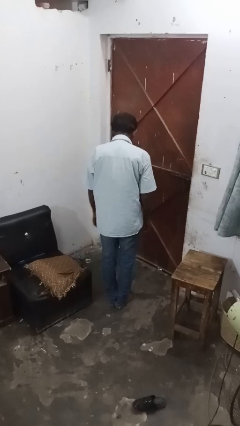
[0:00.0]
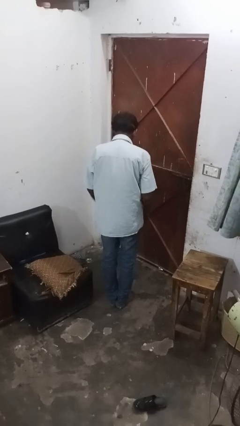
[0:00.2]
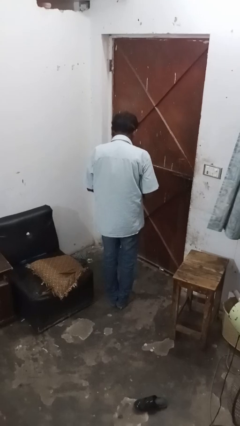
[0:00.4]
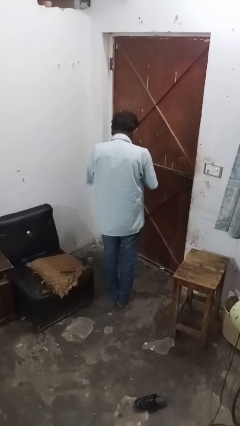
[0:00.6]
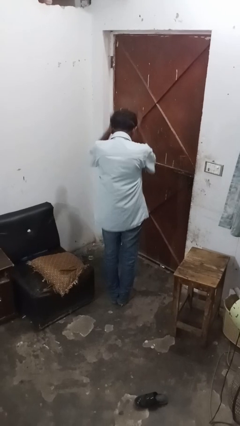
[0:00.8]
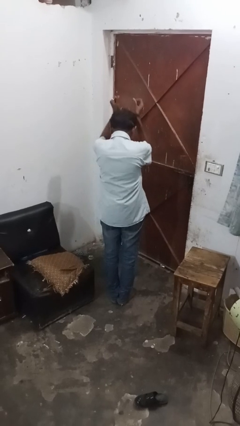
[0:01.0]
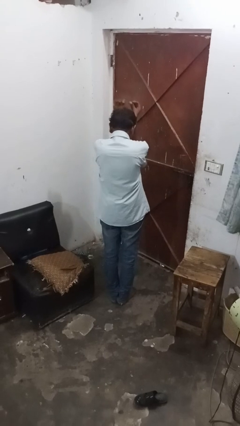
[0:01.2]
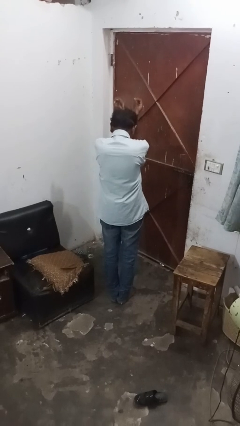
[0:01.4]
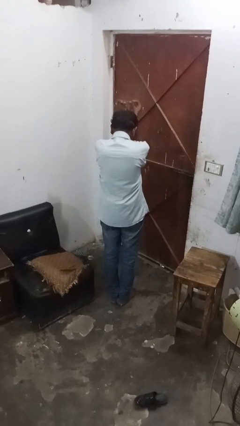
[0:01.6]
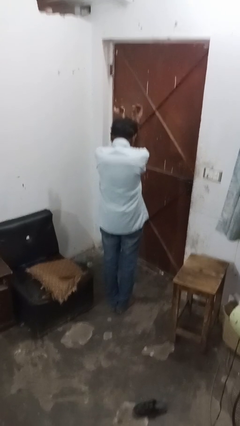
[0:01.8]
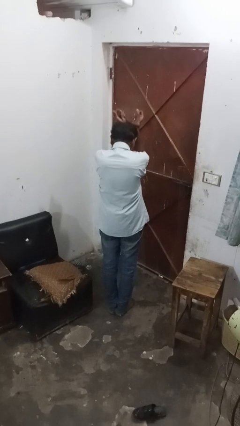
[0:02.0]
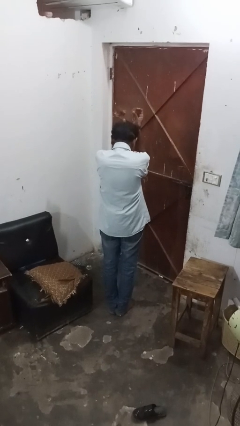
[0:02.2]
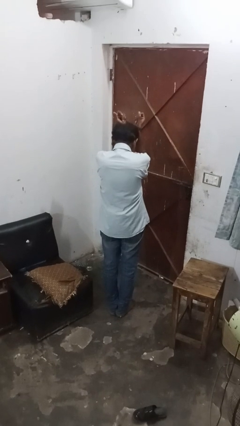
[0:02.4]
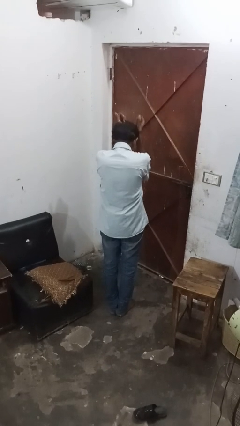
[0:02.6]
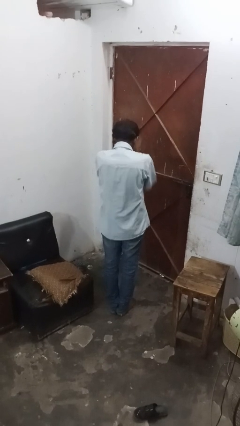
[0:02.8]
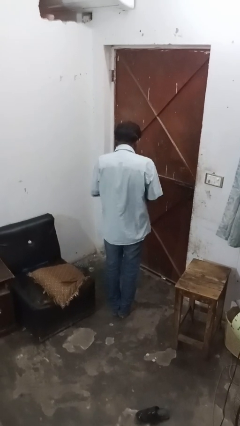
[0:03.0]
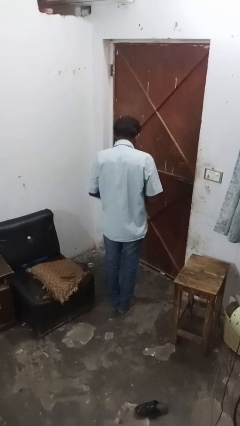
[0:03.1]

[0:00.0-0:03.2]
person snaps fingers

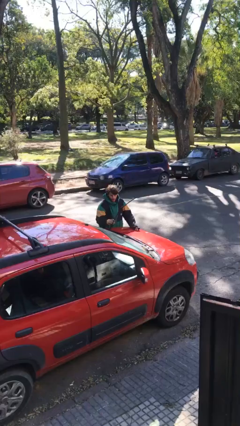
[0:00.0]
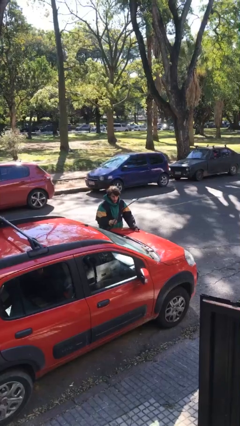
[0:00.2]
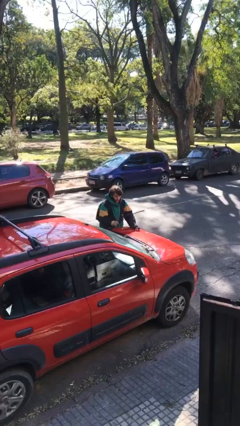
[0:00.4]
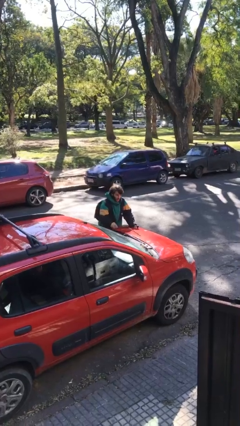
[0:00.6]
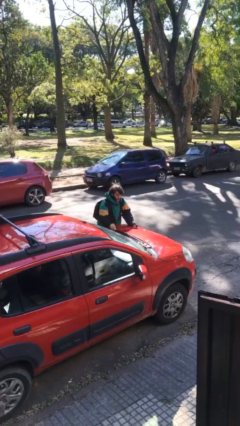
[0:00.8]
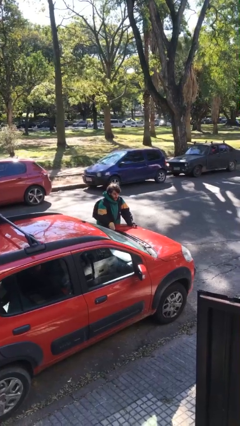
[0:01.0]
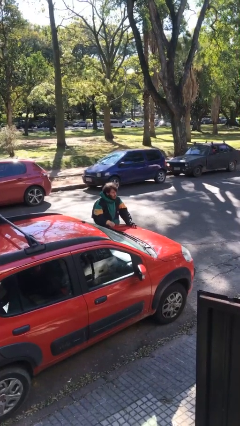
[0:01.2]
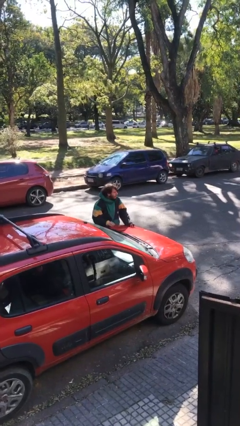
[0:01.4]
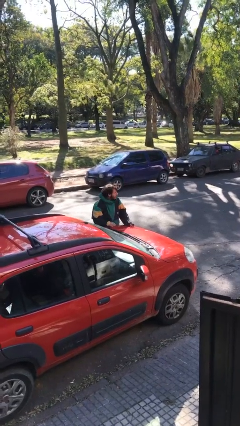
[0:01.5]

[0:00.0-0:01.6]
person flips down car wipers

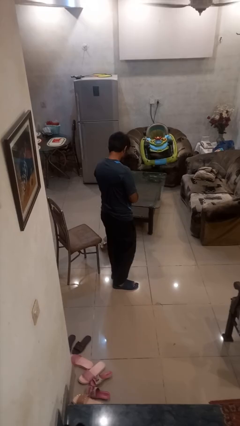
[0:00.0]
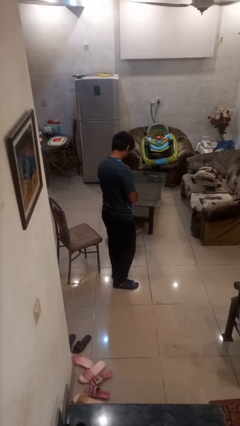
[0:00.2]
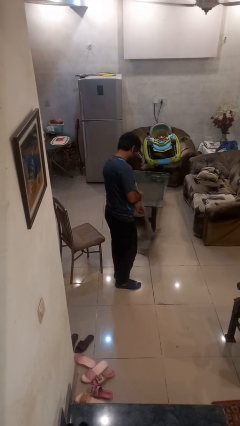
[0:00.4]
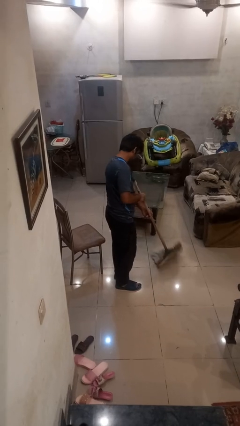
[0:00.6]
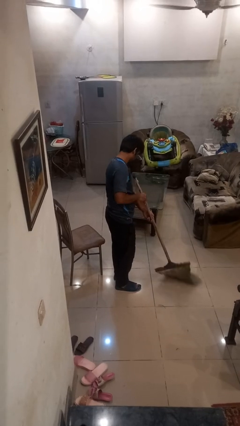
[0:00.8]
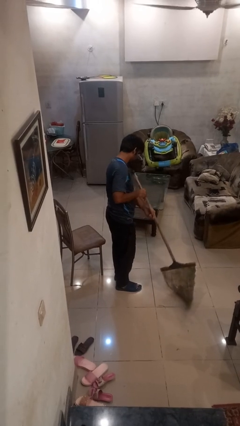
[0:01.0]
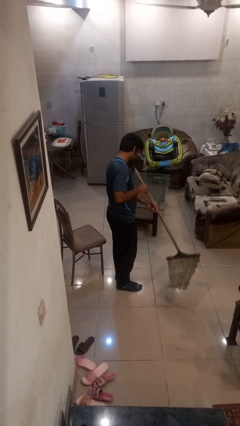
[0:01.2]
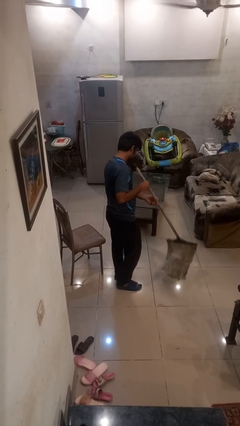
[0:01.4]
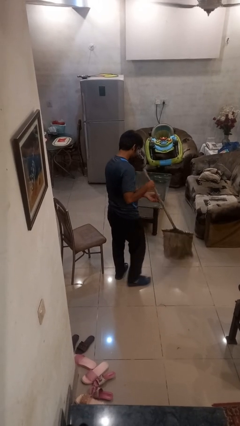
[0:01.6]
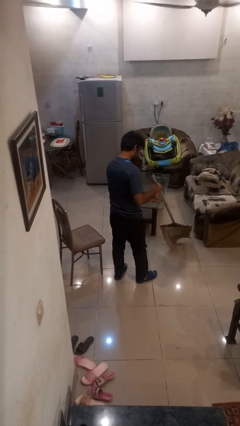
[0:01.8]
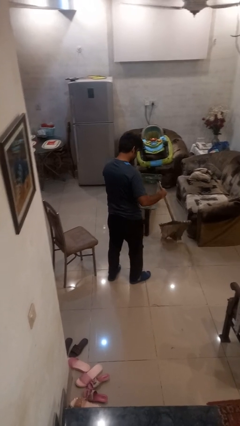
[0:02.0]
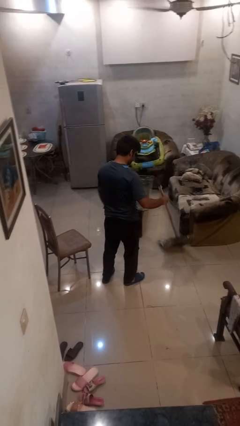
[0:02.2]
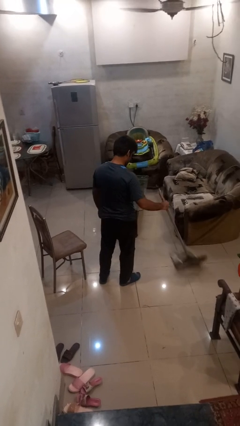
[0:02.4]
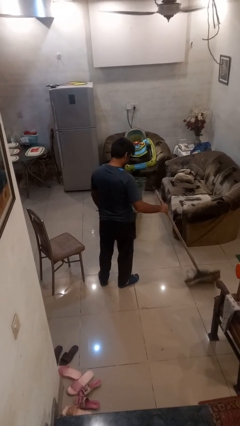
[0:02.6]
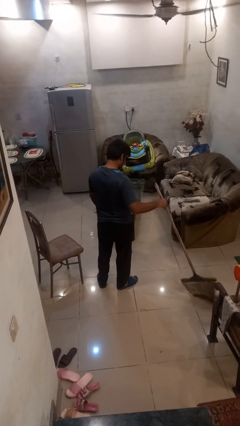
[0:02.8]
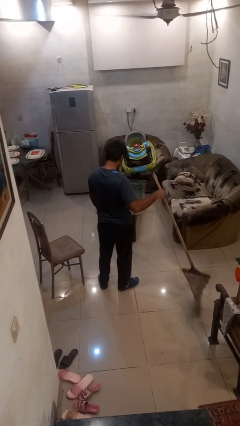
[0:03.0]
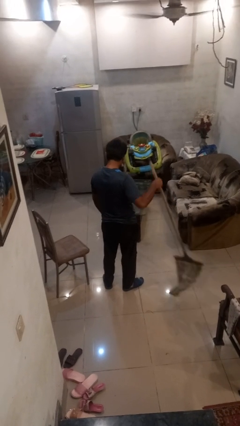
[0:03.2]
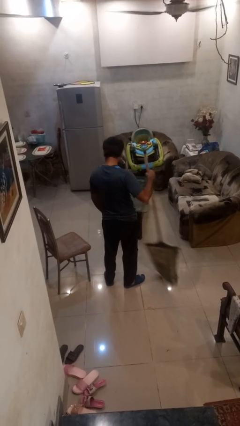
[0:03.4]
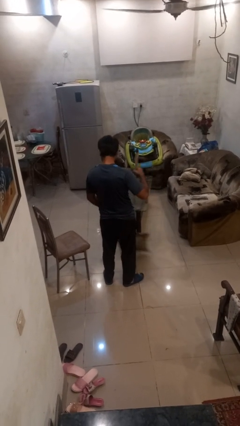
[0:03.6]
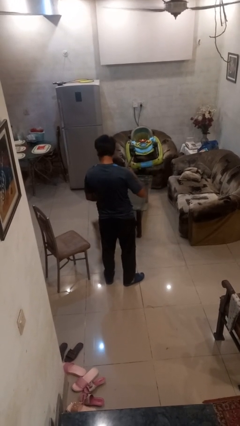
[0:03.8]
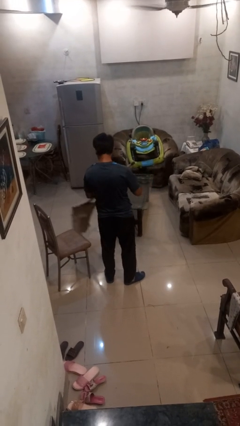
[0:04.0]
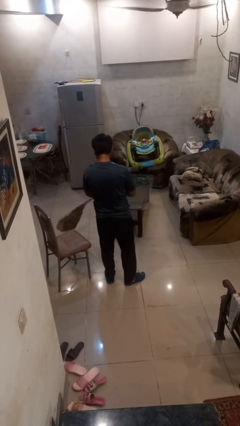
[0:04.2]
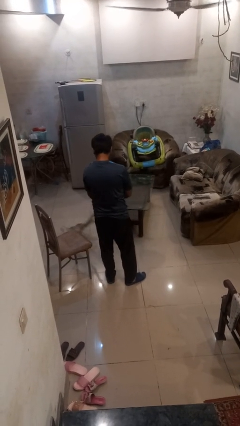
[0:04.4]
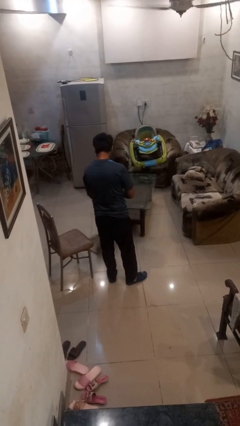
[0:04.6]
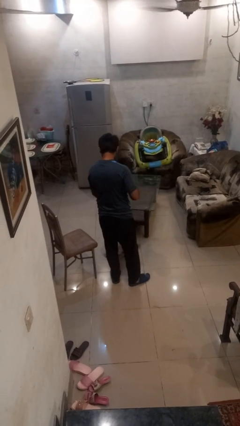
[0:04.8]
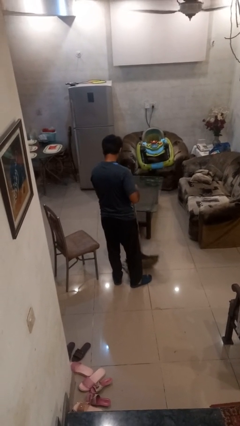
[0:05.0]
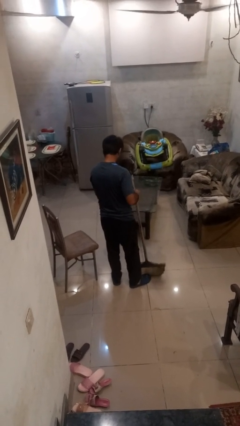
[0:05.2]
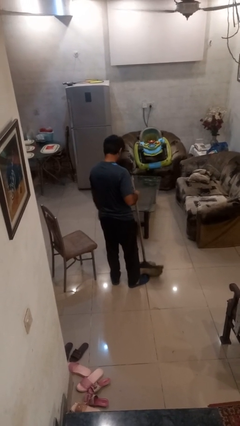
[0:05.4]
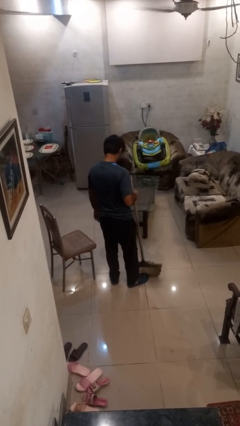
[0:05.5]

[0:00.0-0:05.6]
person mops

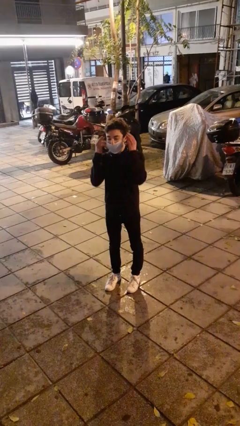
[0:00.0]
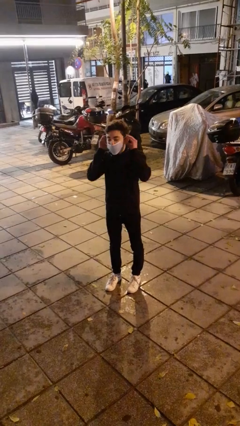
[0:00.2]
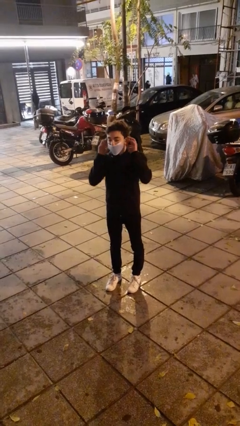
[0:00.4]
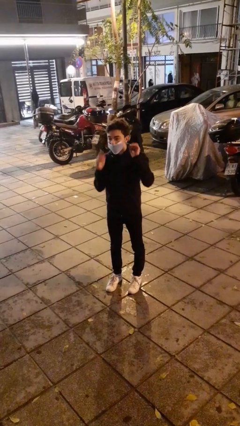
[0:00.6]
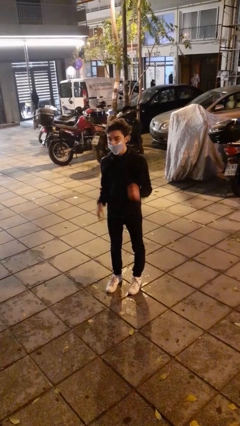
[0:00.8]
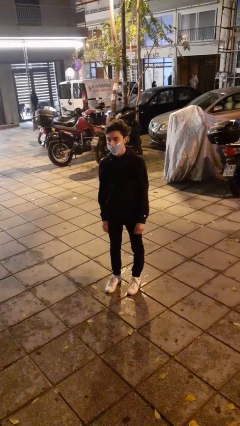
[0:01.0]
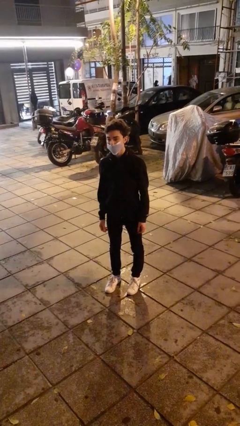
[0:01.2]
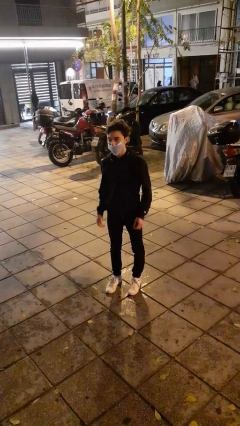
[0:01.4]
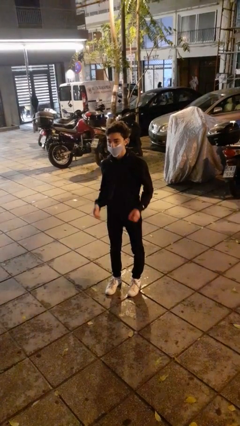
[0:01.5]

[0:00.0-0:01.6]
person puts on facemask

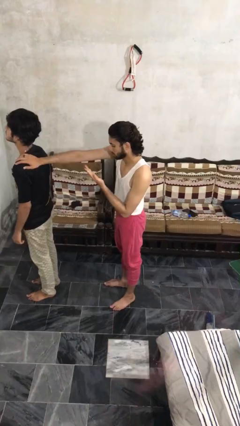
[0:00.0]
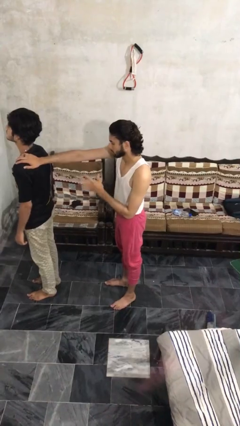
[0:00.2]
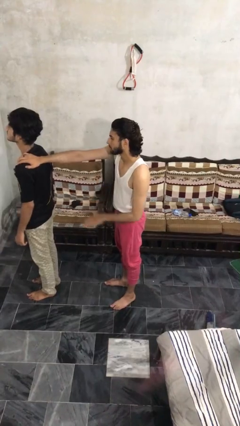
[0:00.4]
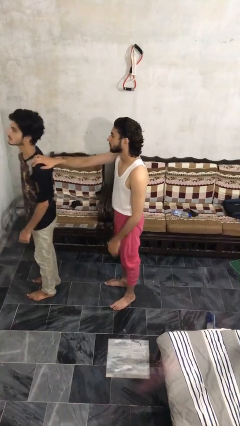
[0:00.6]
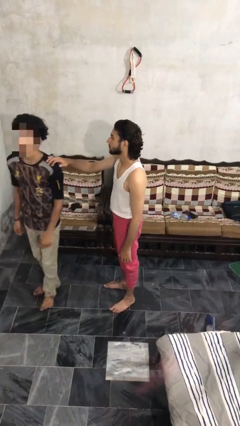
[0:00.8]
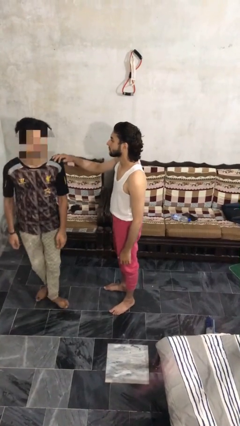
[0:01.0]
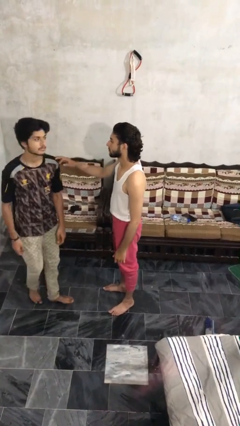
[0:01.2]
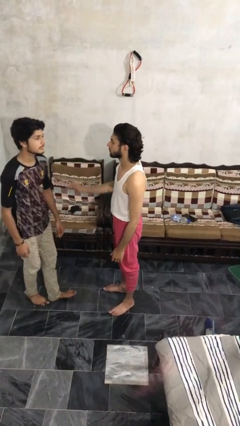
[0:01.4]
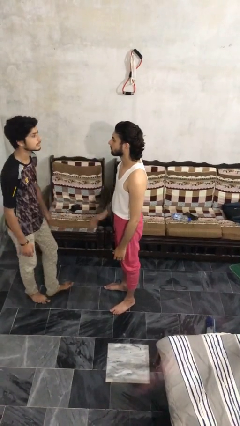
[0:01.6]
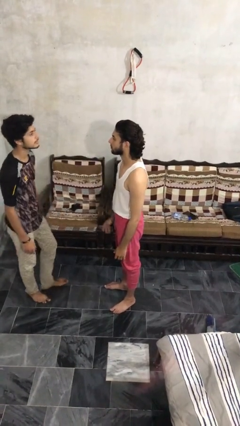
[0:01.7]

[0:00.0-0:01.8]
person spins person around

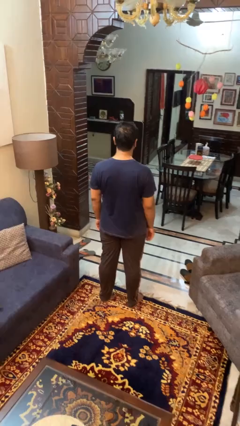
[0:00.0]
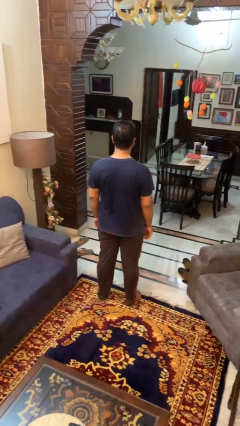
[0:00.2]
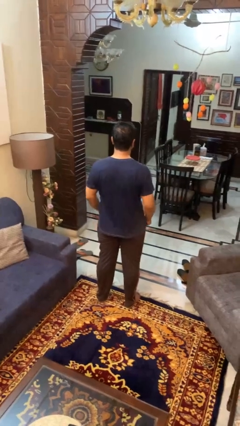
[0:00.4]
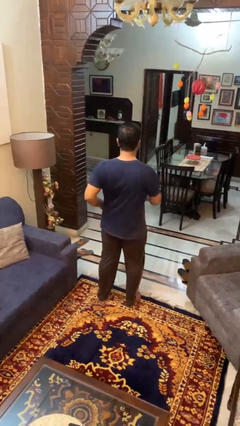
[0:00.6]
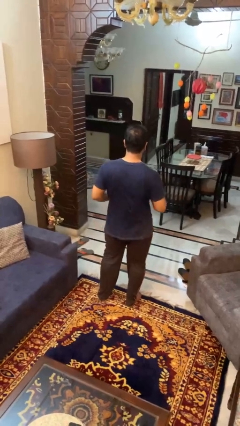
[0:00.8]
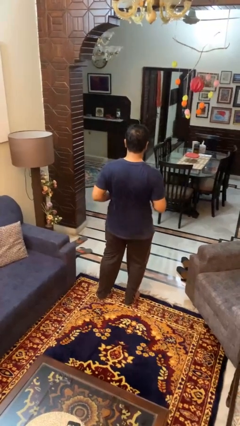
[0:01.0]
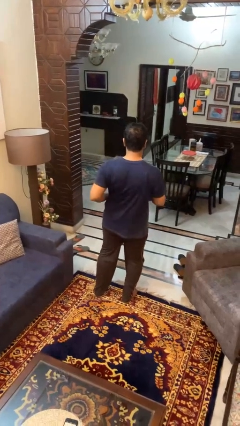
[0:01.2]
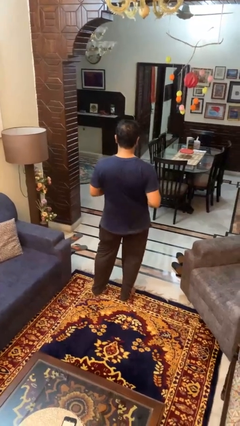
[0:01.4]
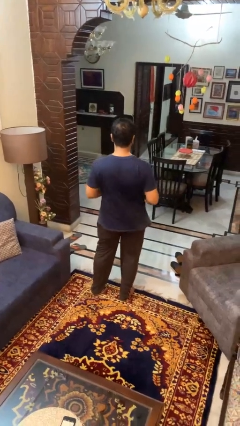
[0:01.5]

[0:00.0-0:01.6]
person wiggles hips

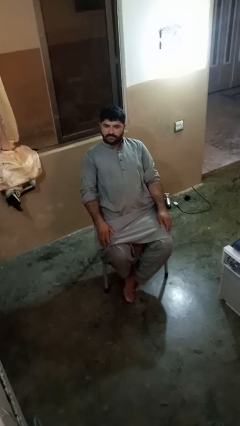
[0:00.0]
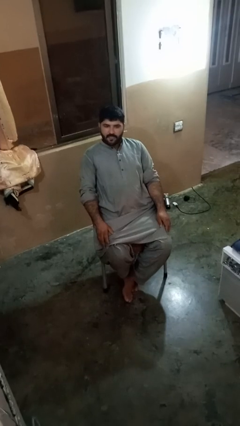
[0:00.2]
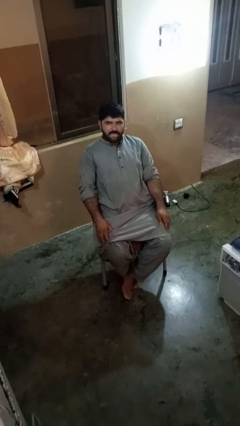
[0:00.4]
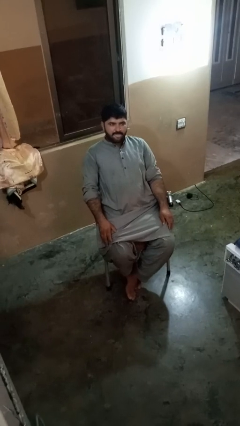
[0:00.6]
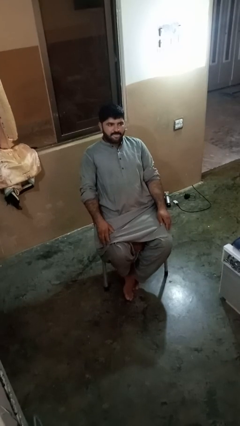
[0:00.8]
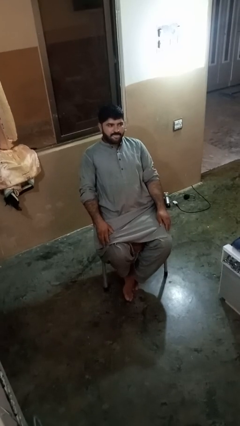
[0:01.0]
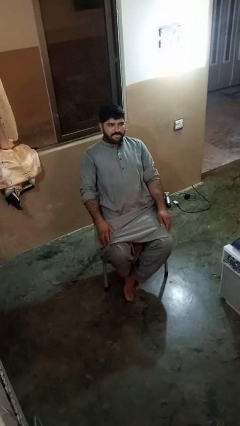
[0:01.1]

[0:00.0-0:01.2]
person sticks out tongue
